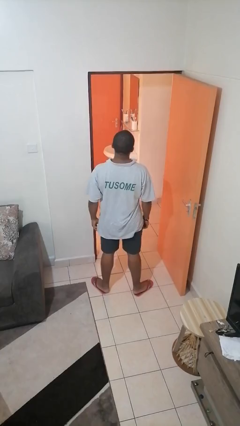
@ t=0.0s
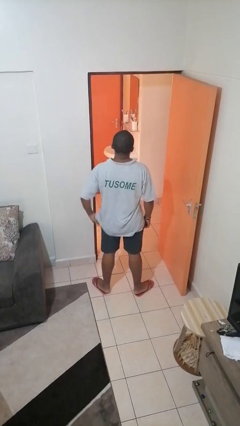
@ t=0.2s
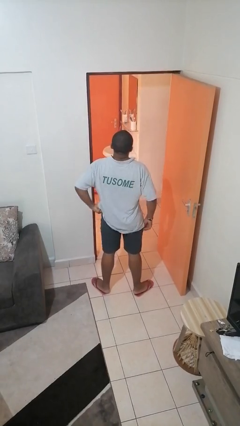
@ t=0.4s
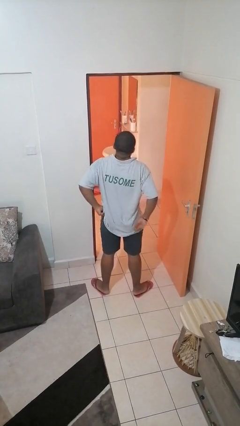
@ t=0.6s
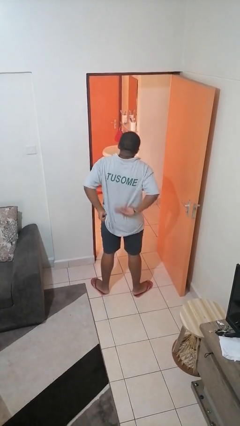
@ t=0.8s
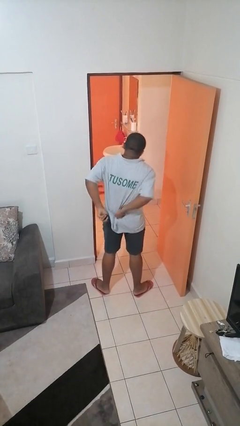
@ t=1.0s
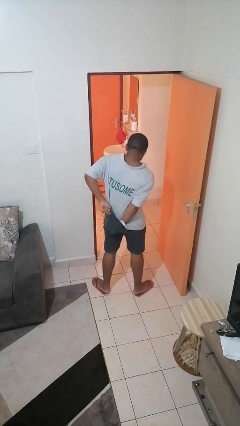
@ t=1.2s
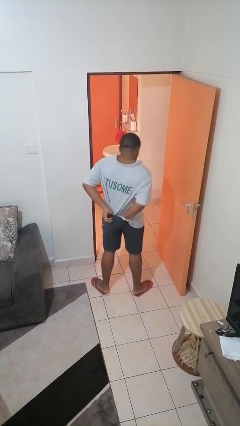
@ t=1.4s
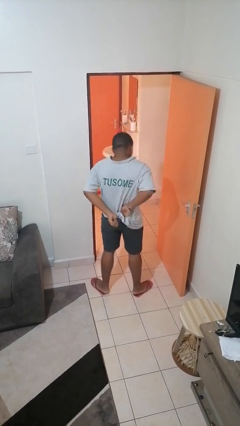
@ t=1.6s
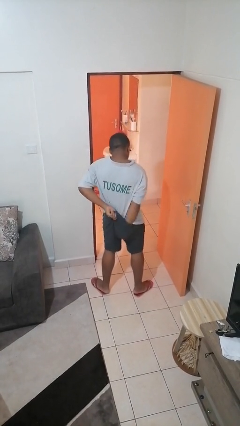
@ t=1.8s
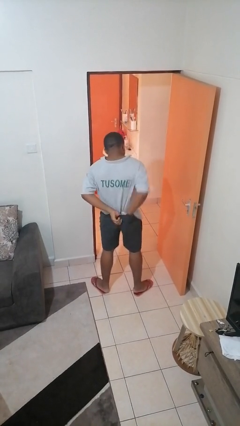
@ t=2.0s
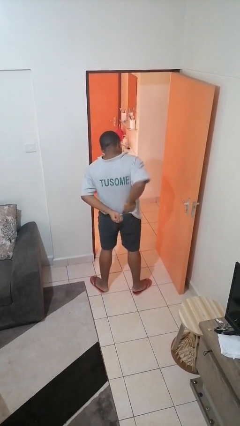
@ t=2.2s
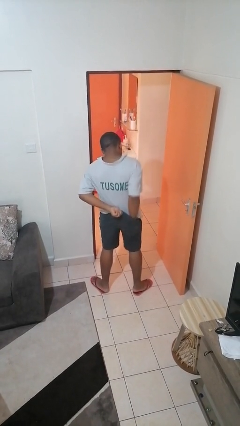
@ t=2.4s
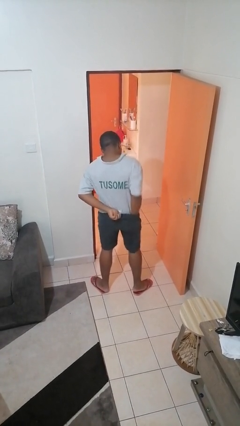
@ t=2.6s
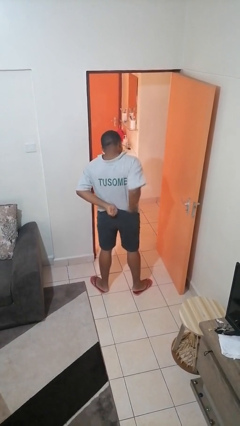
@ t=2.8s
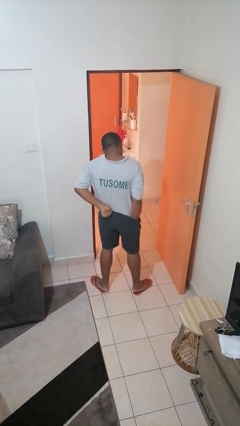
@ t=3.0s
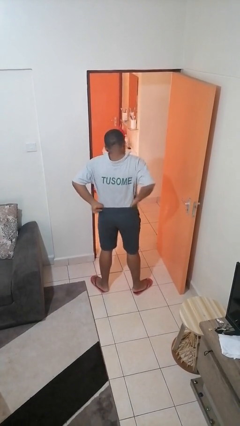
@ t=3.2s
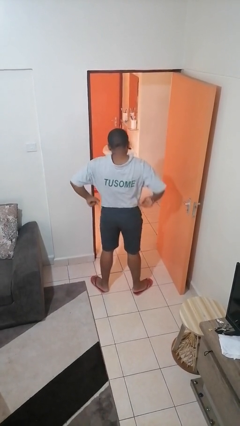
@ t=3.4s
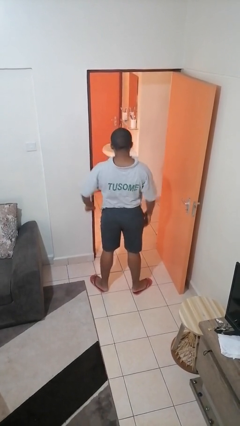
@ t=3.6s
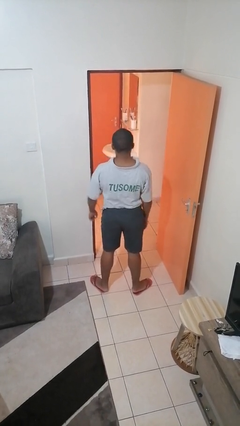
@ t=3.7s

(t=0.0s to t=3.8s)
person tucks in shirt

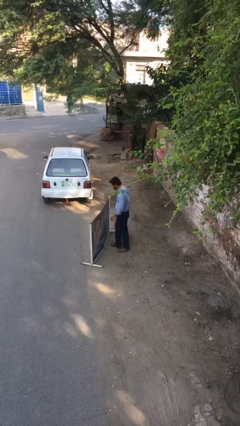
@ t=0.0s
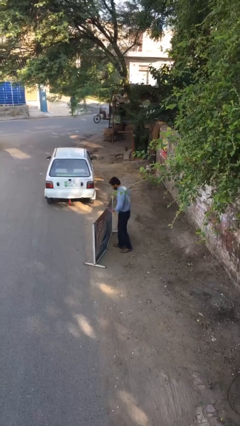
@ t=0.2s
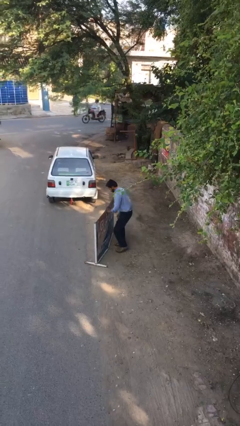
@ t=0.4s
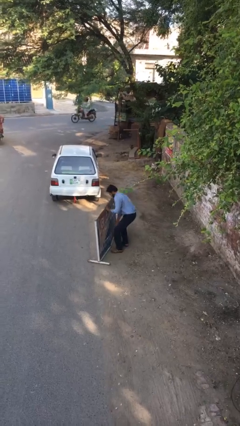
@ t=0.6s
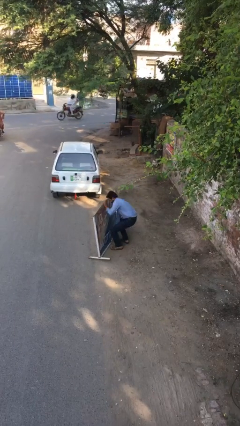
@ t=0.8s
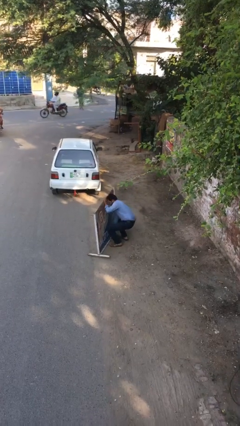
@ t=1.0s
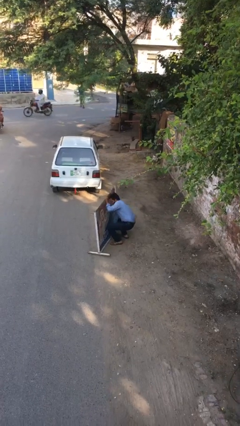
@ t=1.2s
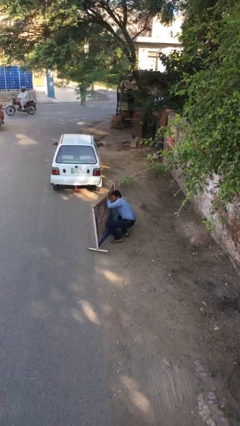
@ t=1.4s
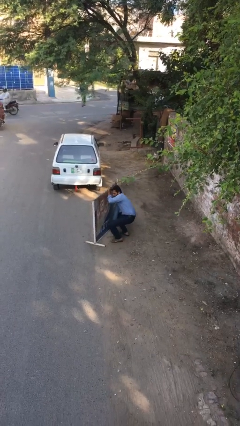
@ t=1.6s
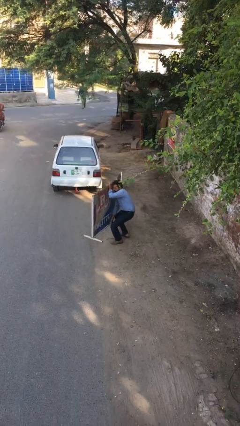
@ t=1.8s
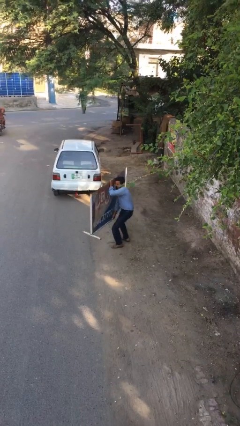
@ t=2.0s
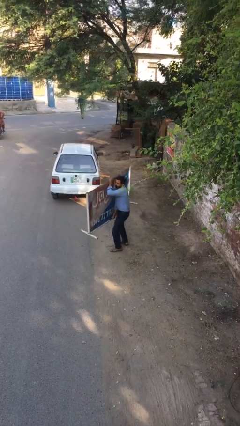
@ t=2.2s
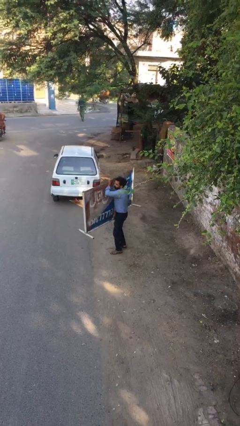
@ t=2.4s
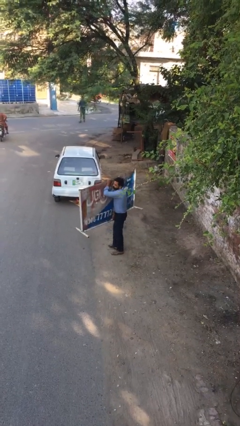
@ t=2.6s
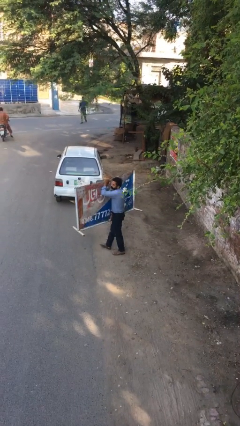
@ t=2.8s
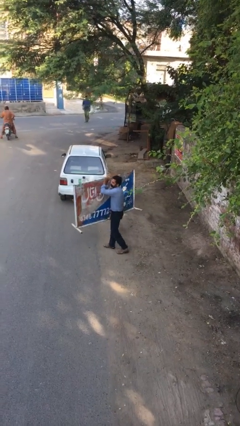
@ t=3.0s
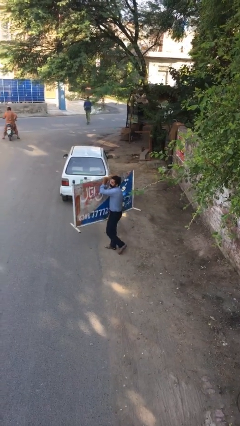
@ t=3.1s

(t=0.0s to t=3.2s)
person picks up object from floor

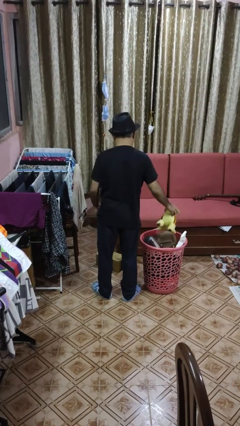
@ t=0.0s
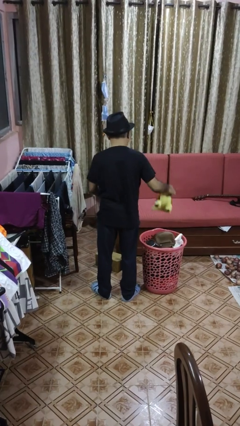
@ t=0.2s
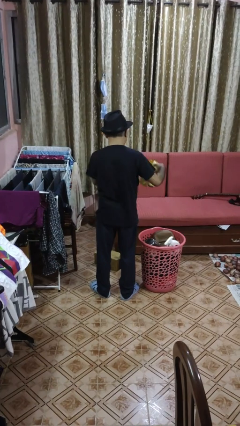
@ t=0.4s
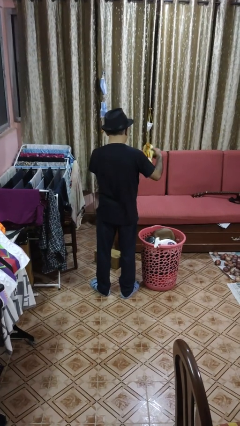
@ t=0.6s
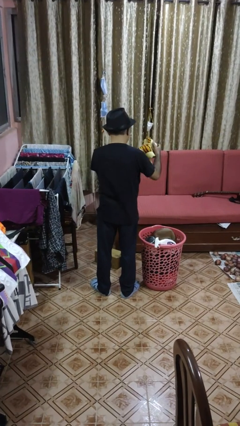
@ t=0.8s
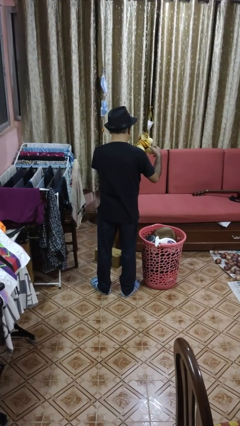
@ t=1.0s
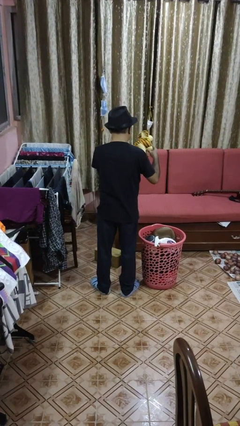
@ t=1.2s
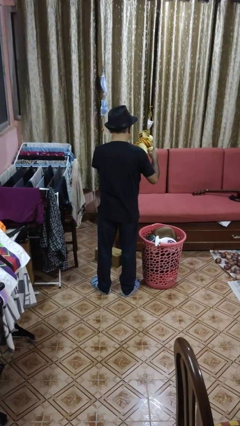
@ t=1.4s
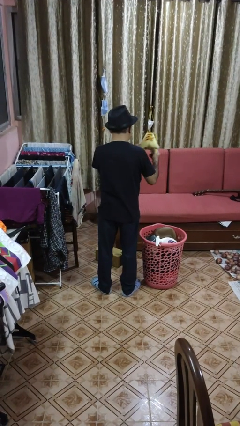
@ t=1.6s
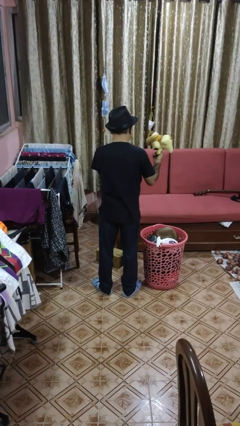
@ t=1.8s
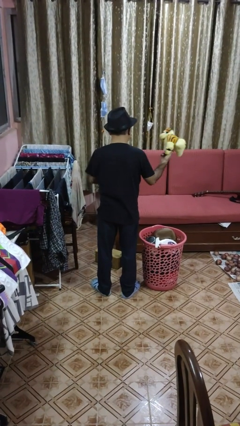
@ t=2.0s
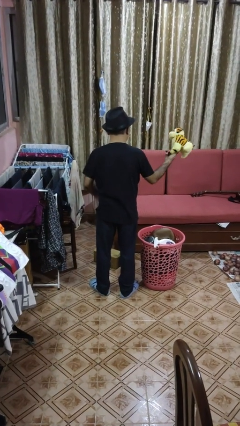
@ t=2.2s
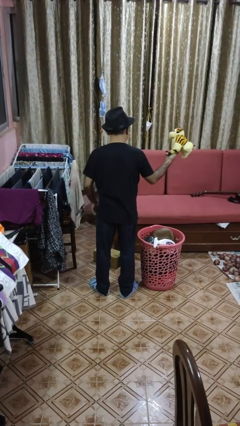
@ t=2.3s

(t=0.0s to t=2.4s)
person takes object from basket

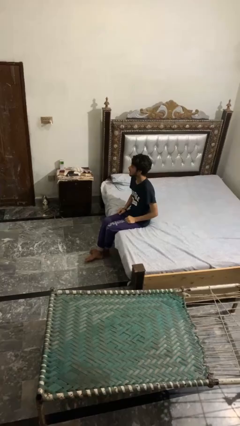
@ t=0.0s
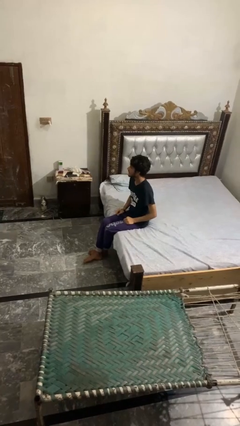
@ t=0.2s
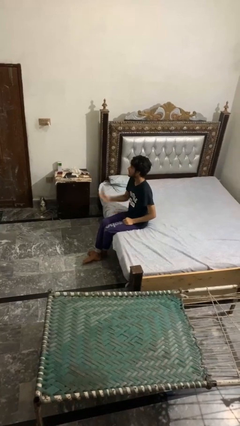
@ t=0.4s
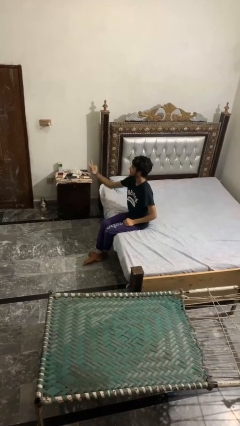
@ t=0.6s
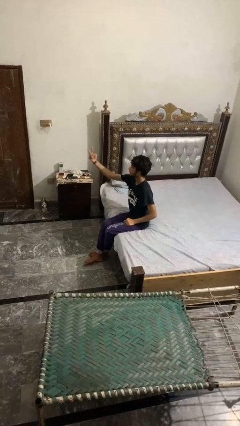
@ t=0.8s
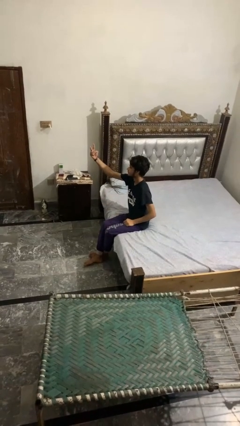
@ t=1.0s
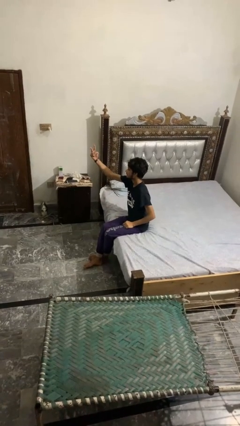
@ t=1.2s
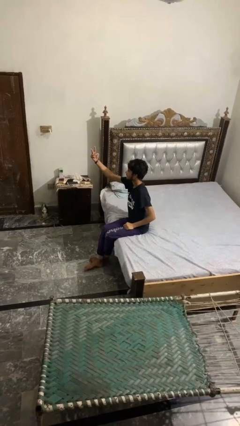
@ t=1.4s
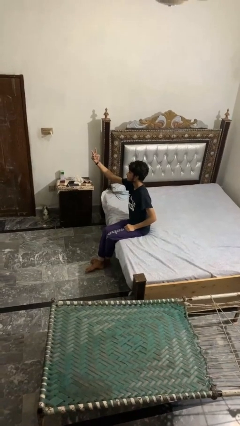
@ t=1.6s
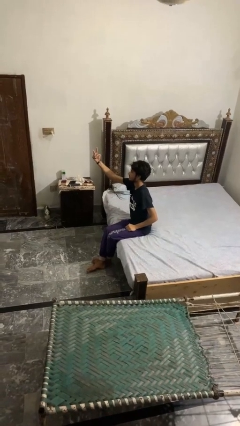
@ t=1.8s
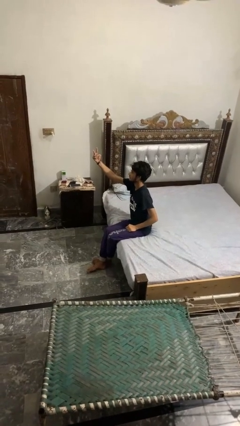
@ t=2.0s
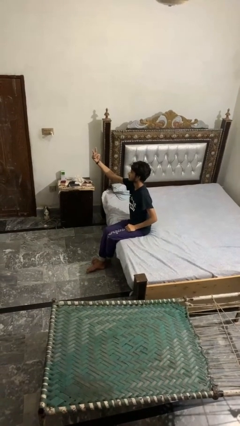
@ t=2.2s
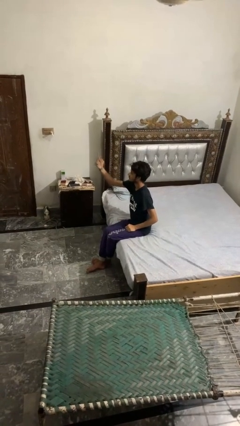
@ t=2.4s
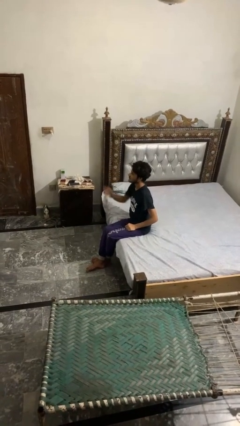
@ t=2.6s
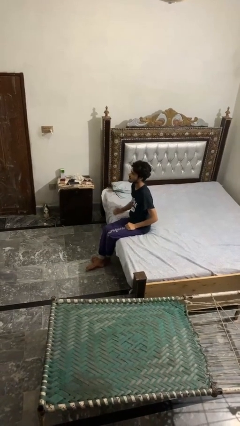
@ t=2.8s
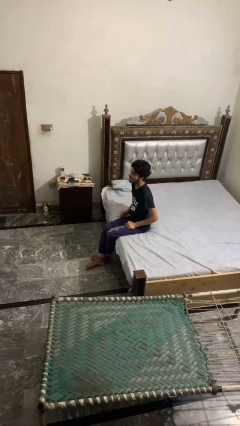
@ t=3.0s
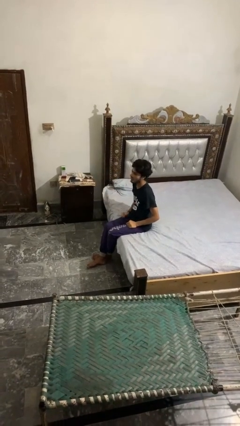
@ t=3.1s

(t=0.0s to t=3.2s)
person gestures peace

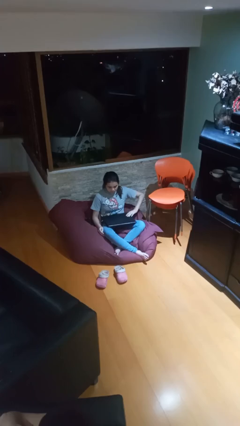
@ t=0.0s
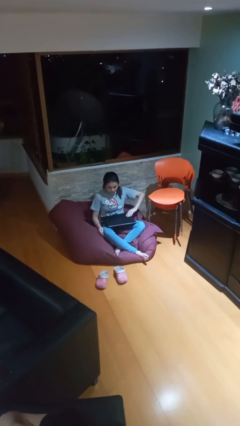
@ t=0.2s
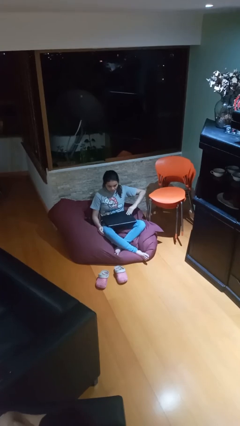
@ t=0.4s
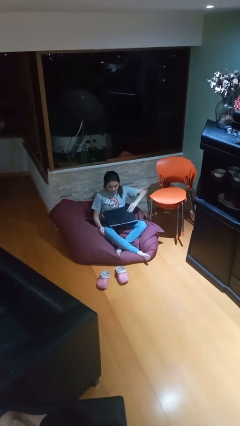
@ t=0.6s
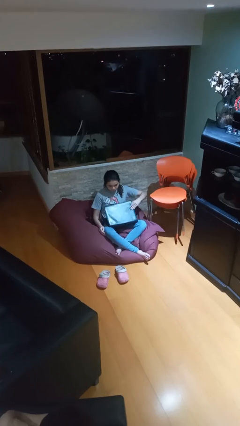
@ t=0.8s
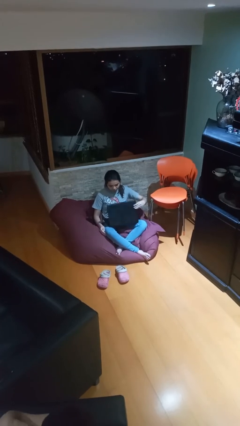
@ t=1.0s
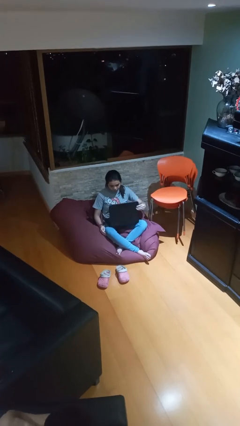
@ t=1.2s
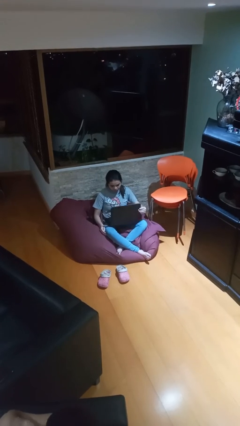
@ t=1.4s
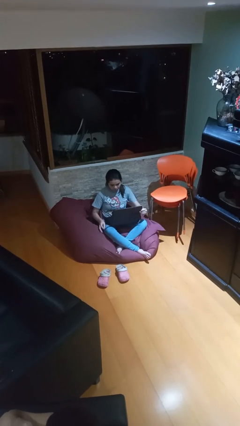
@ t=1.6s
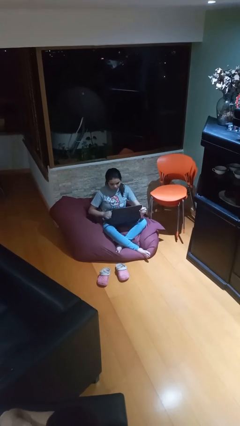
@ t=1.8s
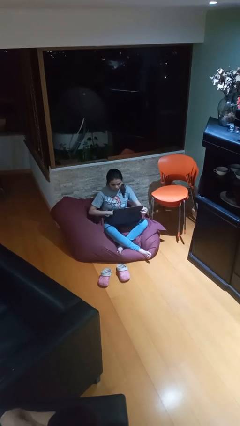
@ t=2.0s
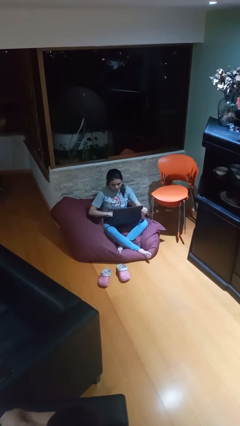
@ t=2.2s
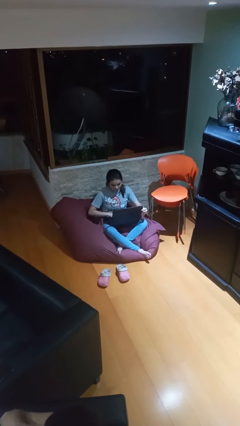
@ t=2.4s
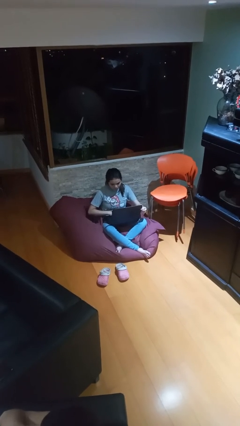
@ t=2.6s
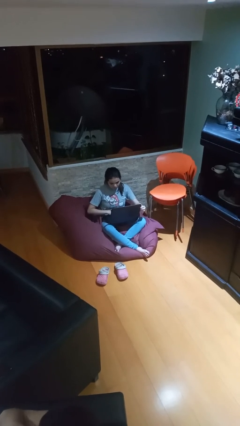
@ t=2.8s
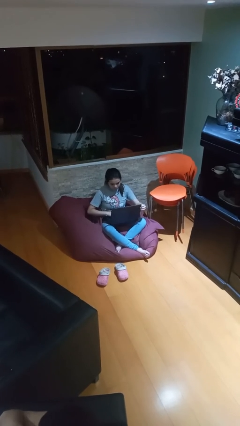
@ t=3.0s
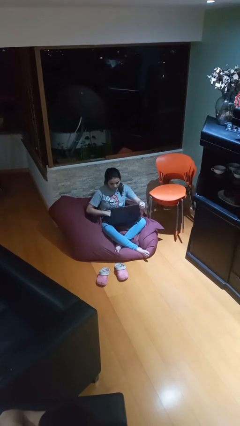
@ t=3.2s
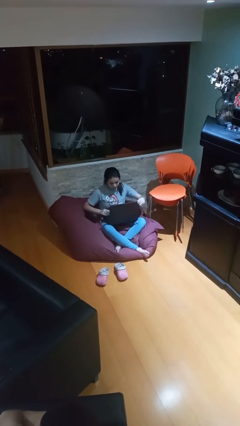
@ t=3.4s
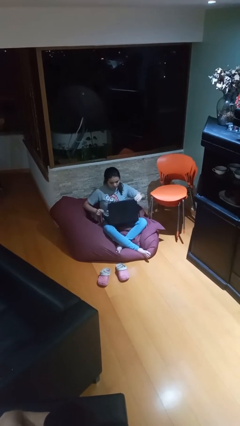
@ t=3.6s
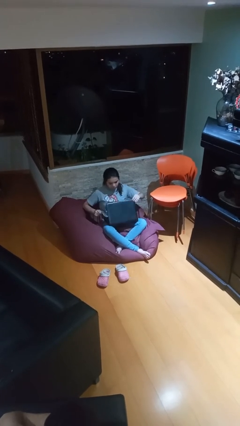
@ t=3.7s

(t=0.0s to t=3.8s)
person interacts with laptop

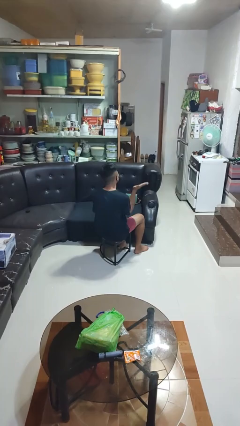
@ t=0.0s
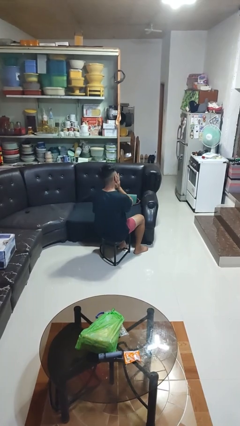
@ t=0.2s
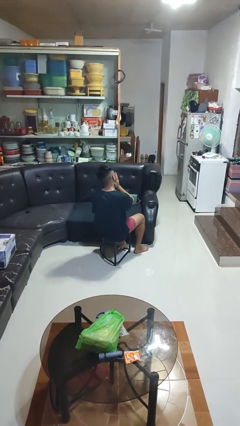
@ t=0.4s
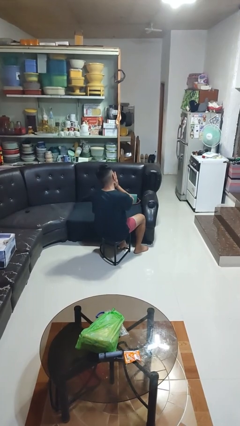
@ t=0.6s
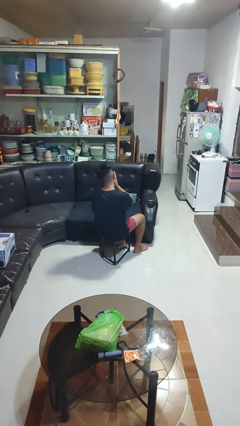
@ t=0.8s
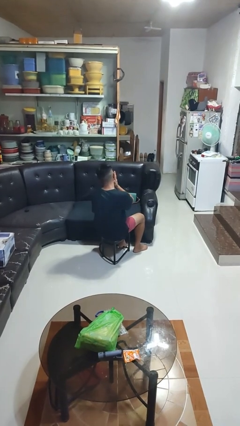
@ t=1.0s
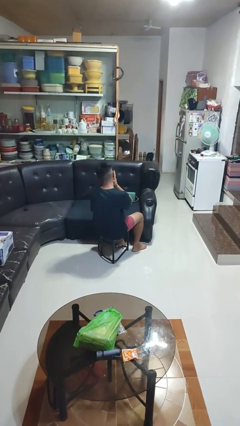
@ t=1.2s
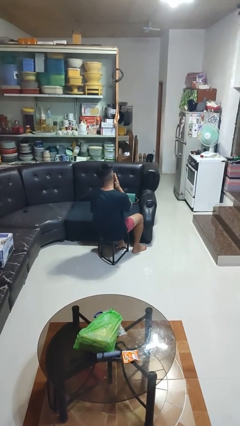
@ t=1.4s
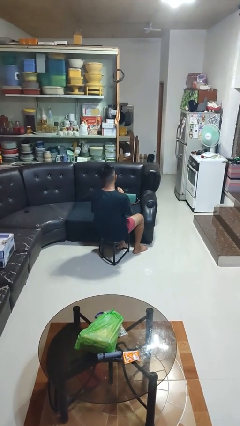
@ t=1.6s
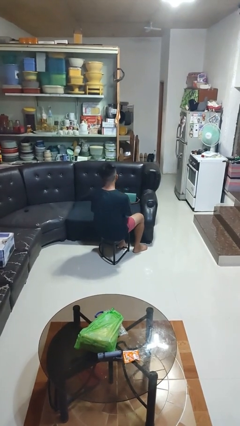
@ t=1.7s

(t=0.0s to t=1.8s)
person swats bug
